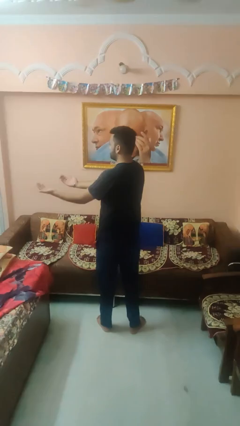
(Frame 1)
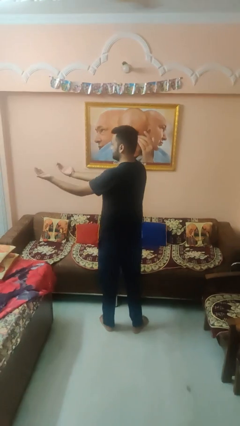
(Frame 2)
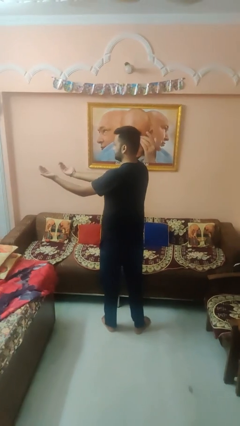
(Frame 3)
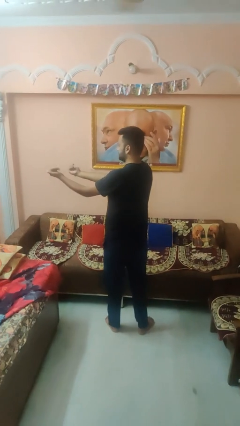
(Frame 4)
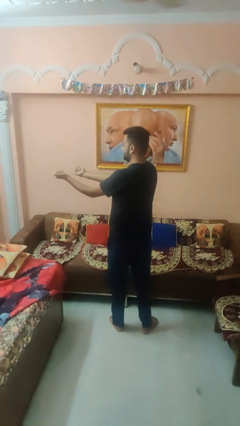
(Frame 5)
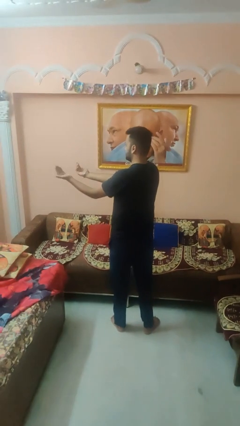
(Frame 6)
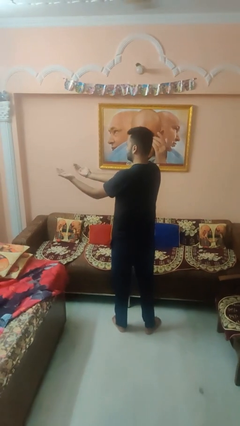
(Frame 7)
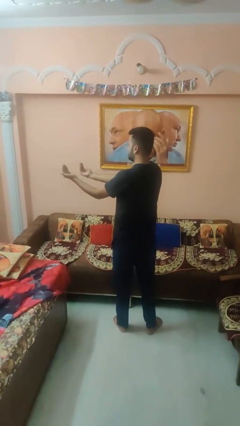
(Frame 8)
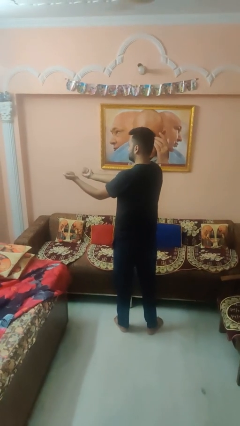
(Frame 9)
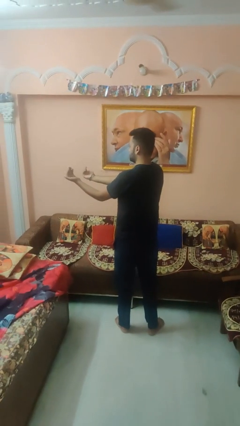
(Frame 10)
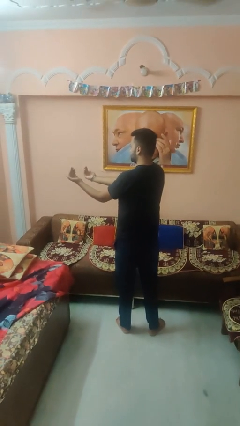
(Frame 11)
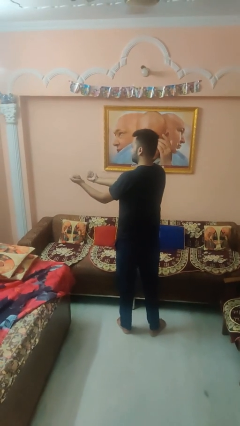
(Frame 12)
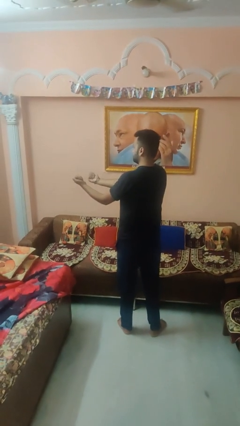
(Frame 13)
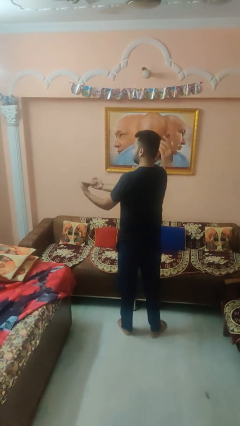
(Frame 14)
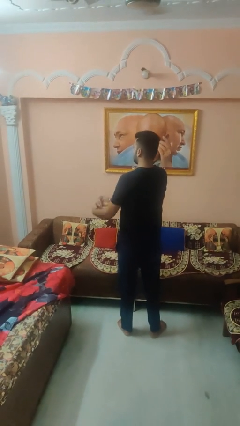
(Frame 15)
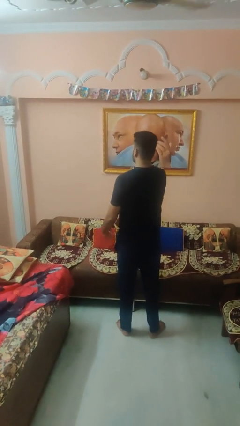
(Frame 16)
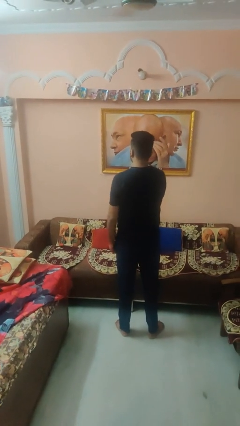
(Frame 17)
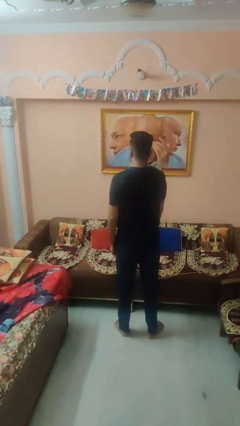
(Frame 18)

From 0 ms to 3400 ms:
person gestures come here

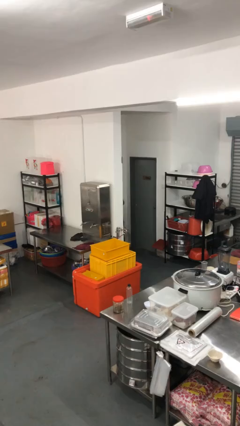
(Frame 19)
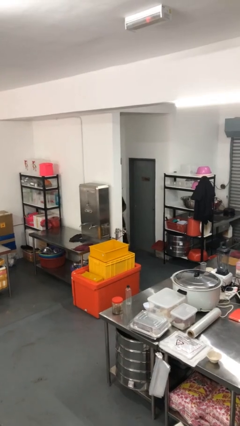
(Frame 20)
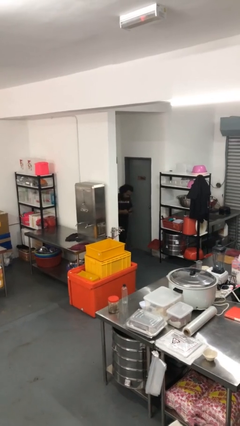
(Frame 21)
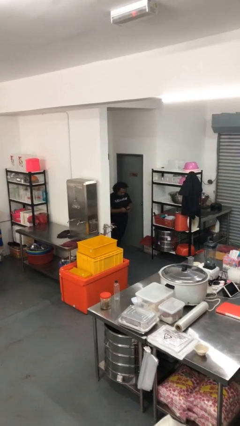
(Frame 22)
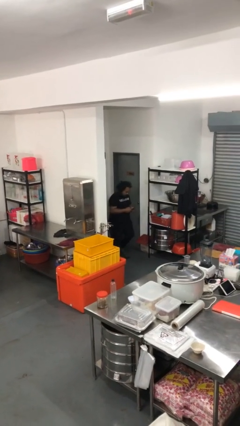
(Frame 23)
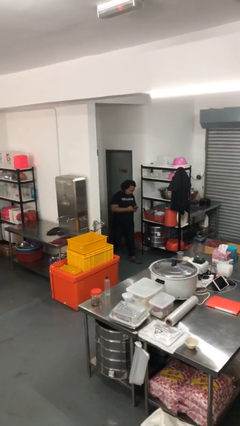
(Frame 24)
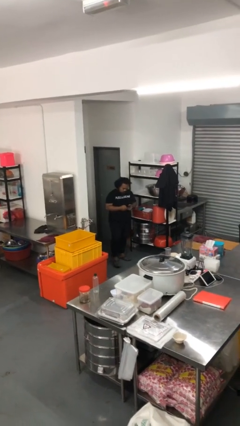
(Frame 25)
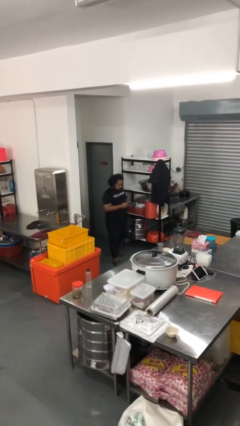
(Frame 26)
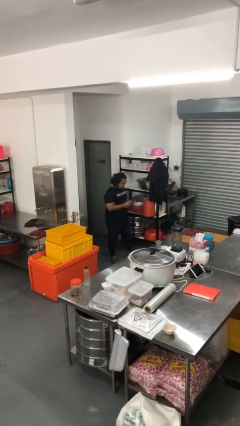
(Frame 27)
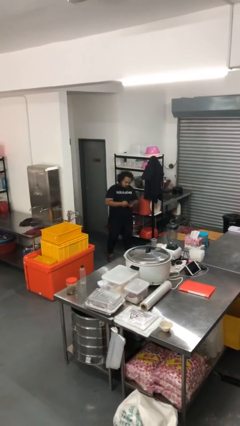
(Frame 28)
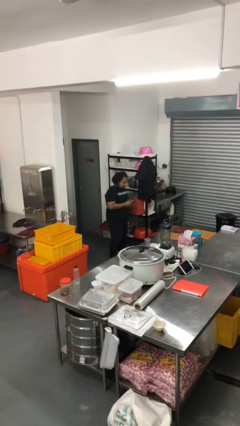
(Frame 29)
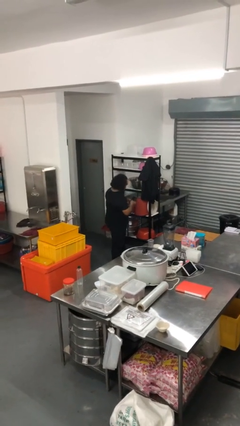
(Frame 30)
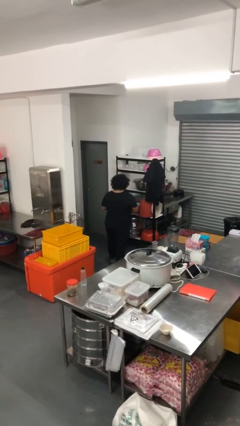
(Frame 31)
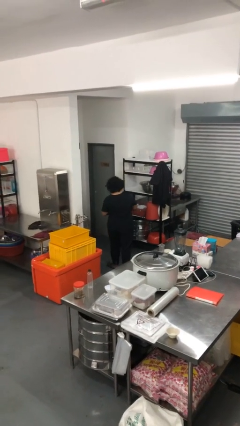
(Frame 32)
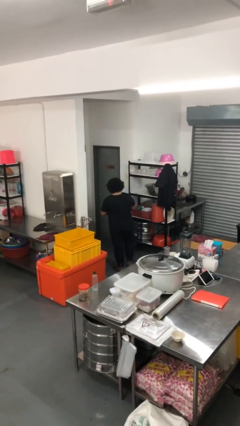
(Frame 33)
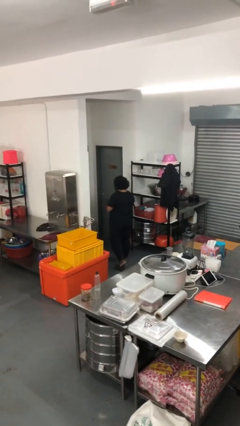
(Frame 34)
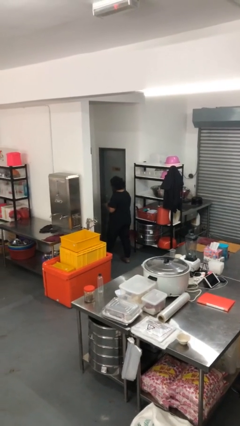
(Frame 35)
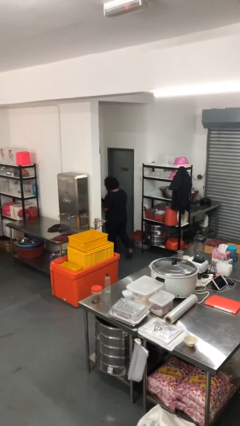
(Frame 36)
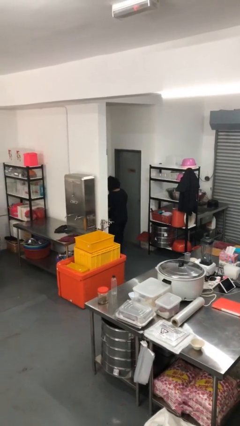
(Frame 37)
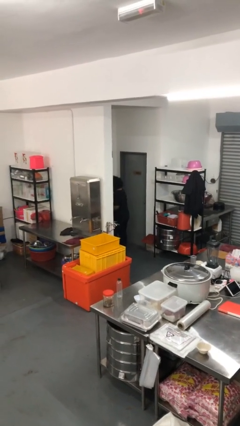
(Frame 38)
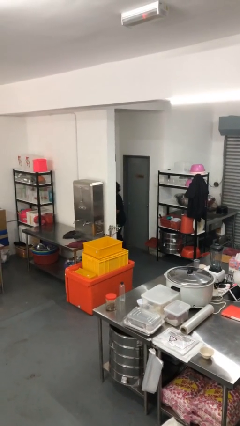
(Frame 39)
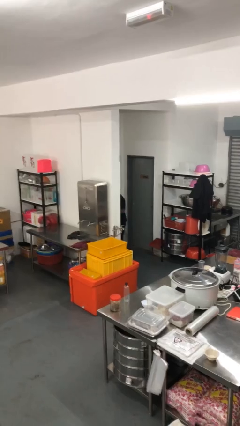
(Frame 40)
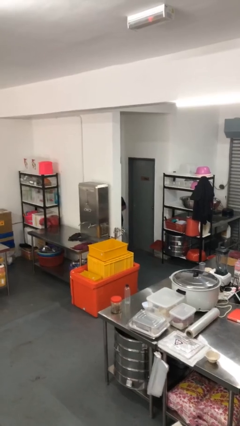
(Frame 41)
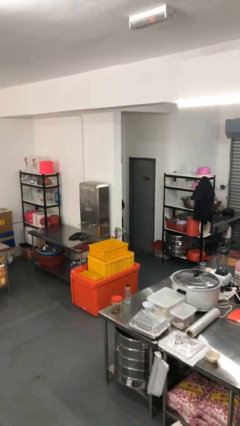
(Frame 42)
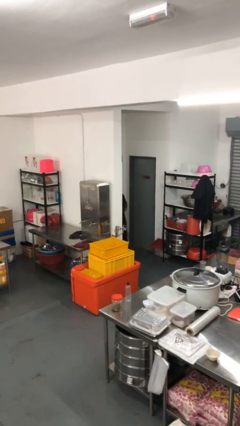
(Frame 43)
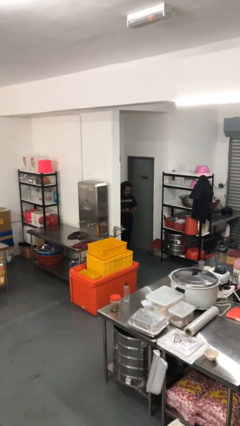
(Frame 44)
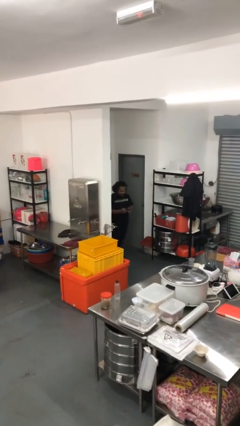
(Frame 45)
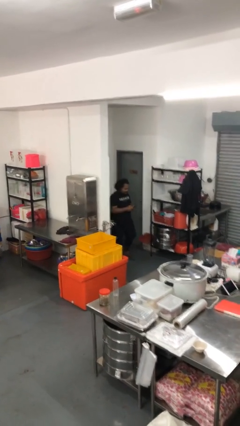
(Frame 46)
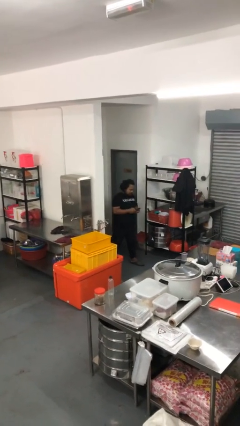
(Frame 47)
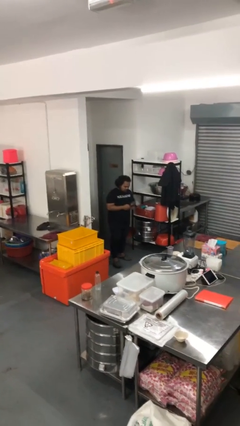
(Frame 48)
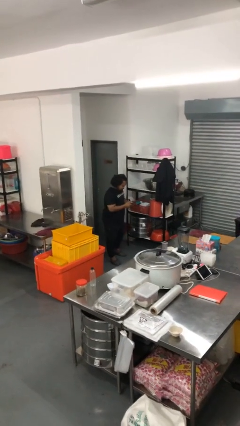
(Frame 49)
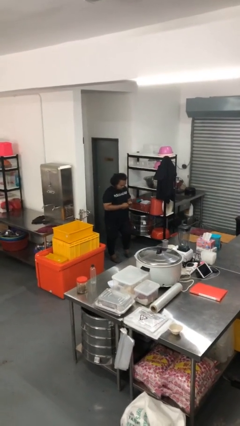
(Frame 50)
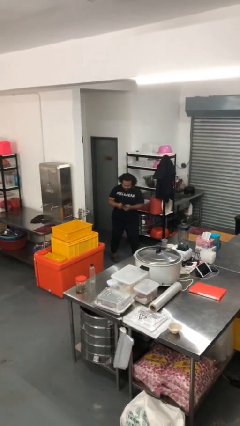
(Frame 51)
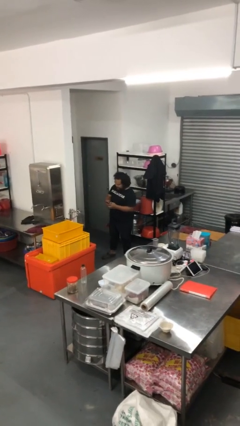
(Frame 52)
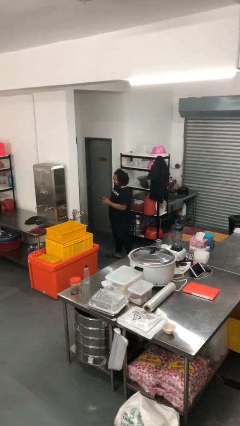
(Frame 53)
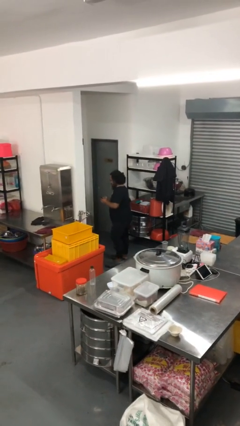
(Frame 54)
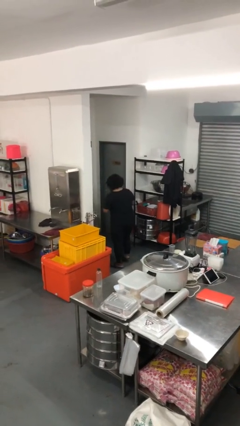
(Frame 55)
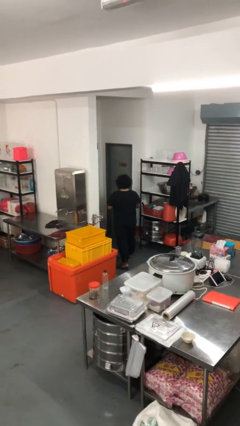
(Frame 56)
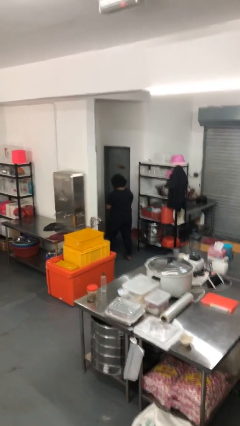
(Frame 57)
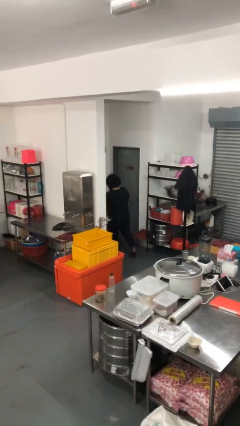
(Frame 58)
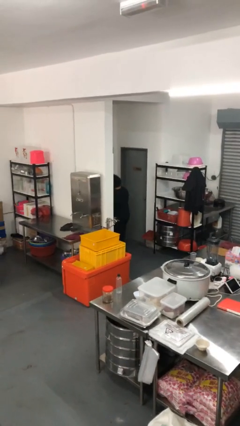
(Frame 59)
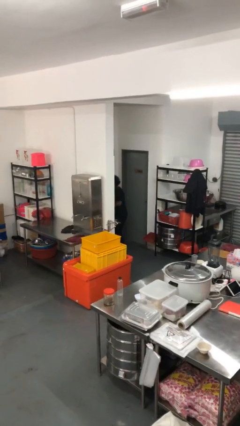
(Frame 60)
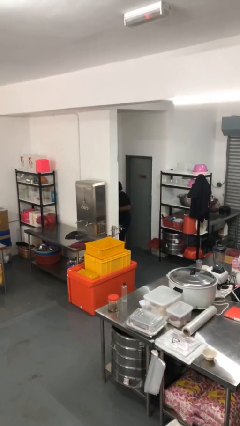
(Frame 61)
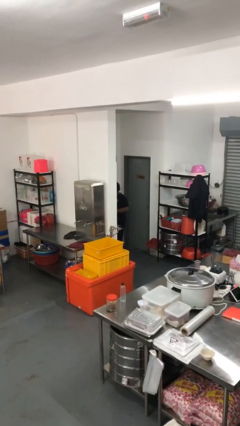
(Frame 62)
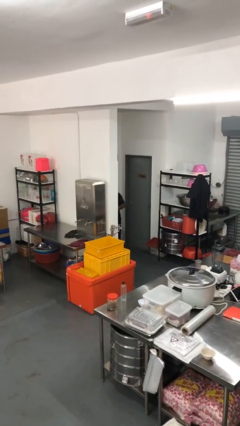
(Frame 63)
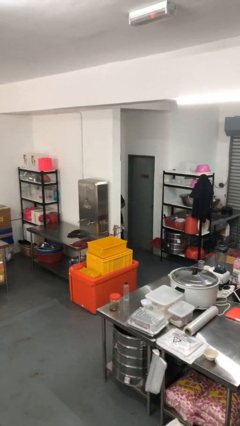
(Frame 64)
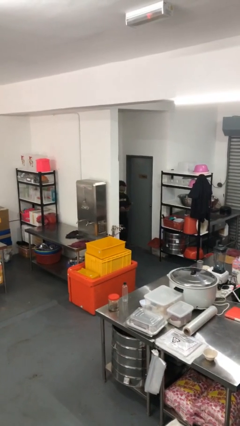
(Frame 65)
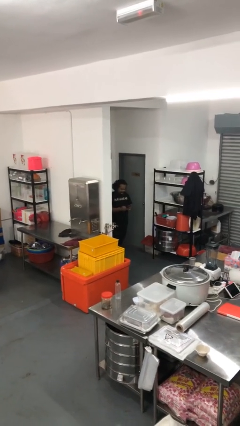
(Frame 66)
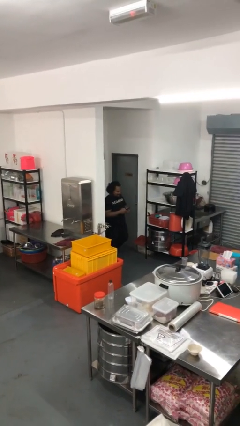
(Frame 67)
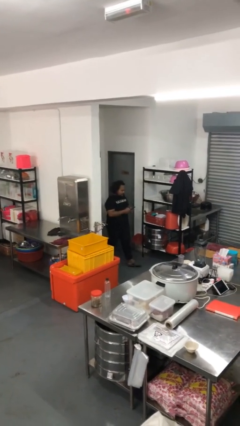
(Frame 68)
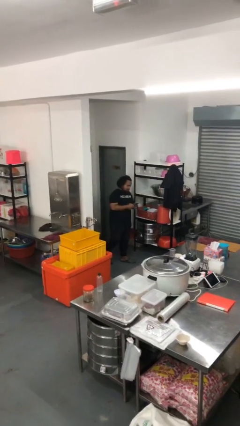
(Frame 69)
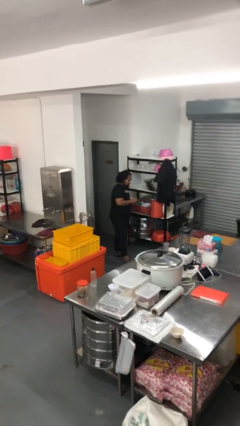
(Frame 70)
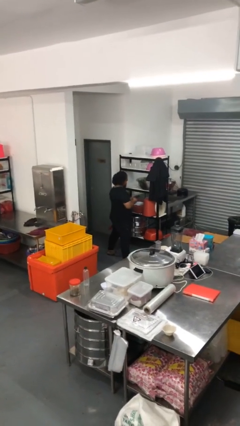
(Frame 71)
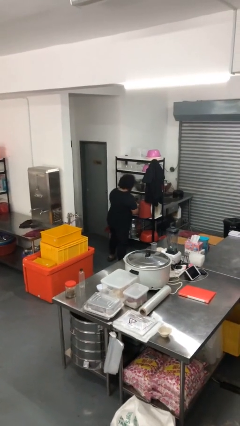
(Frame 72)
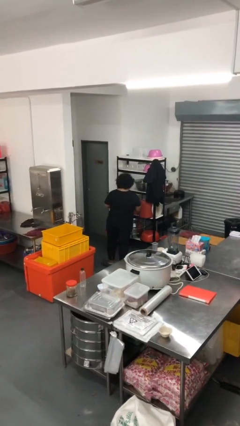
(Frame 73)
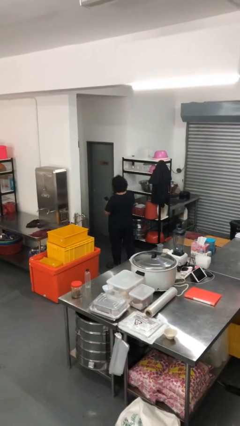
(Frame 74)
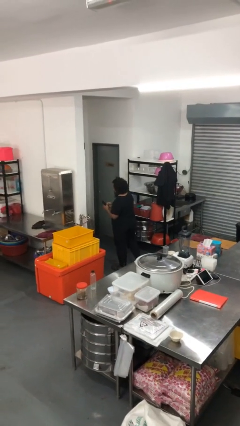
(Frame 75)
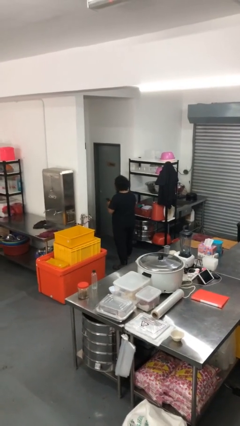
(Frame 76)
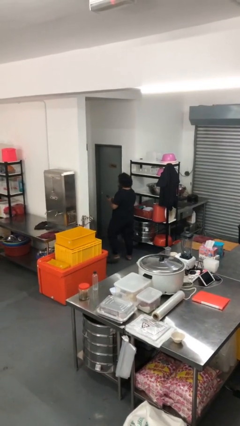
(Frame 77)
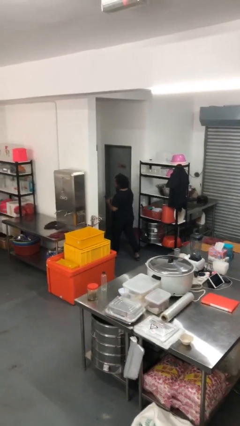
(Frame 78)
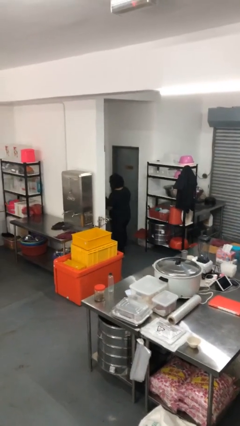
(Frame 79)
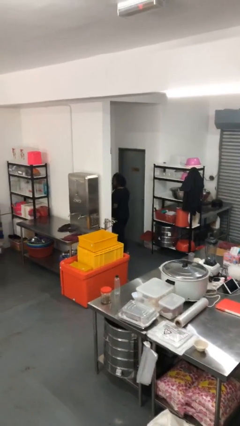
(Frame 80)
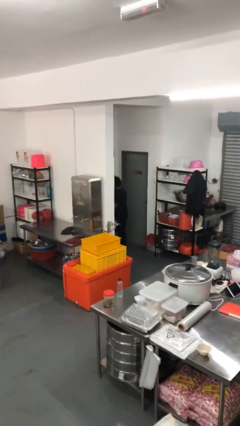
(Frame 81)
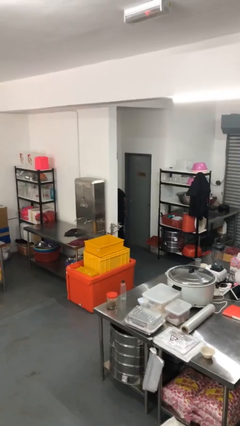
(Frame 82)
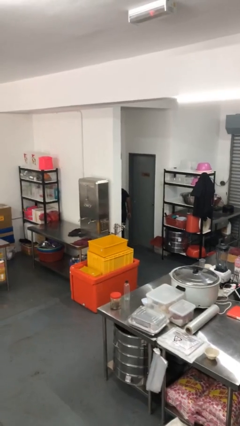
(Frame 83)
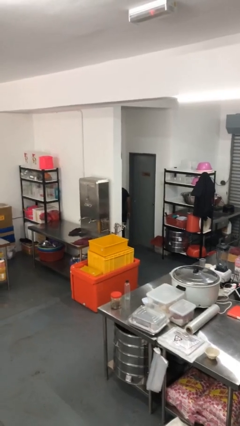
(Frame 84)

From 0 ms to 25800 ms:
person texts on phone

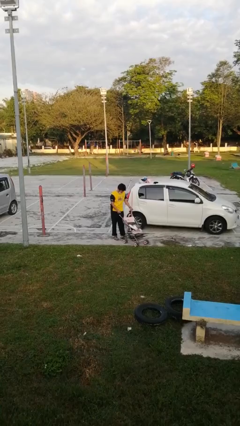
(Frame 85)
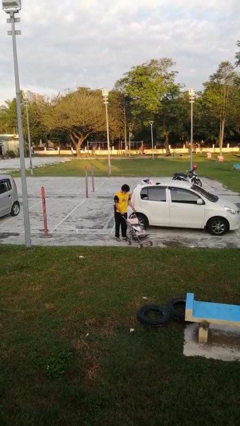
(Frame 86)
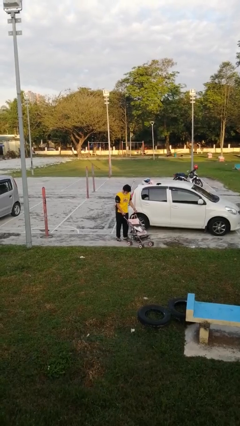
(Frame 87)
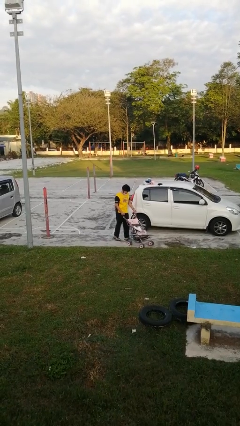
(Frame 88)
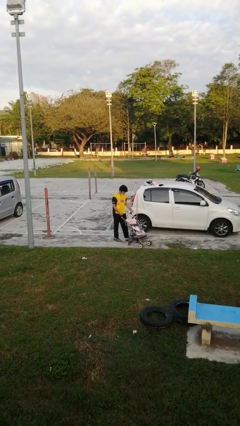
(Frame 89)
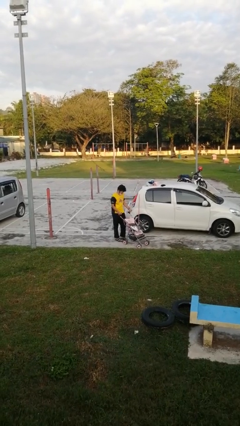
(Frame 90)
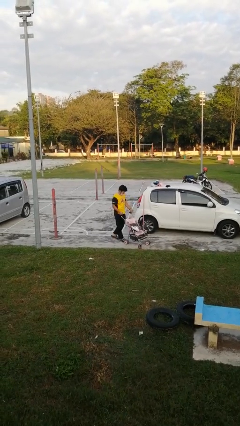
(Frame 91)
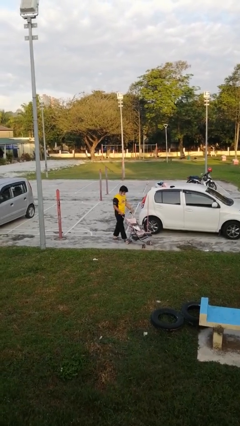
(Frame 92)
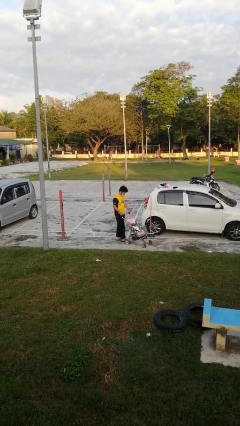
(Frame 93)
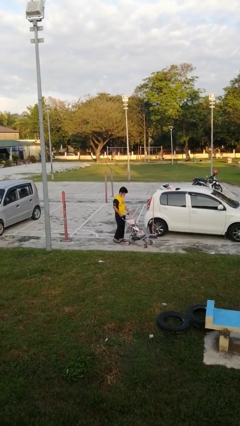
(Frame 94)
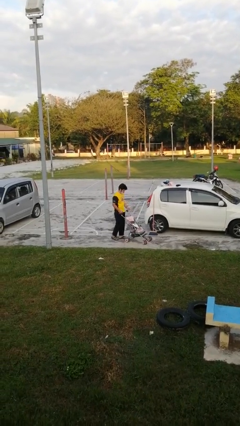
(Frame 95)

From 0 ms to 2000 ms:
person pulls wheeled cart
